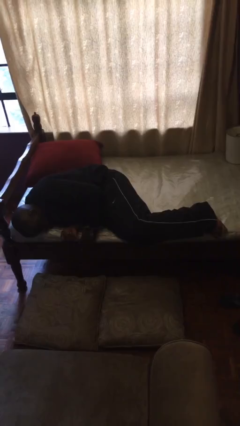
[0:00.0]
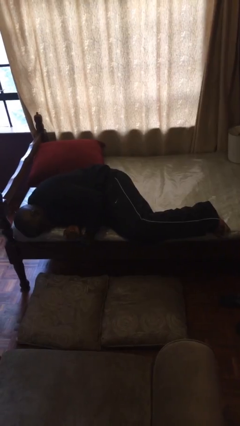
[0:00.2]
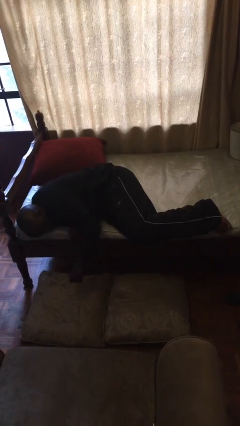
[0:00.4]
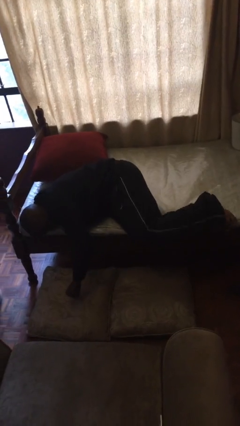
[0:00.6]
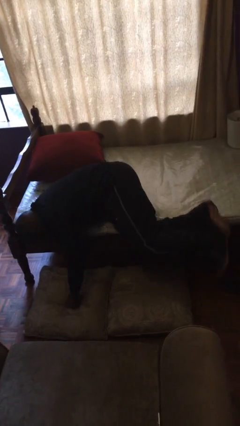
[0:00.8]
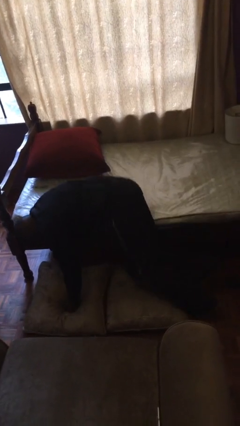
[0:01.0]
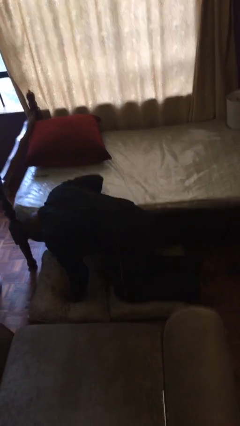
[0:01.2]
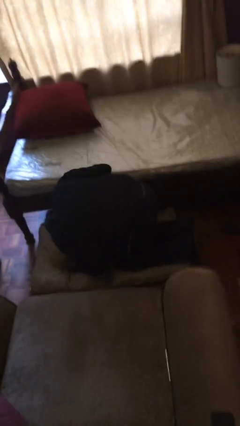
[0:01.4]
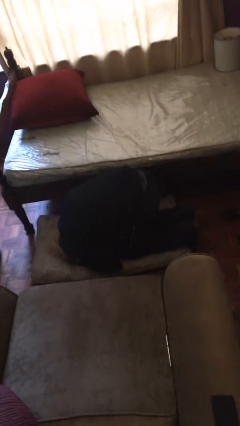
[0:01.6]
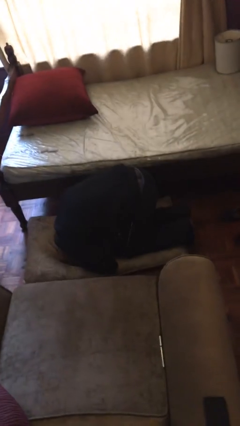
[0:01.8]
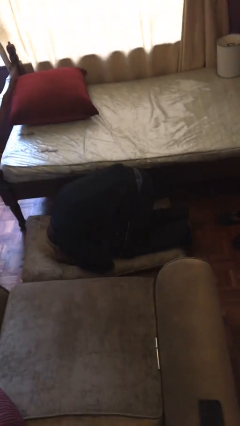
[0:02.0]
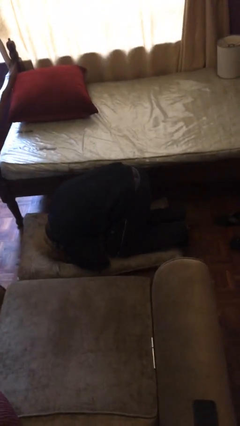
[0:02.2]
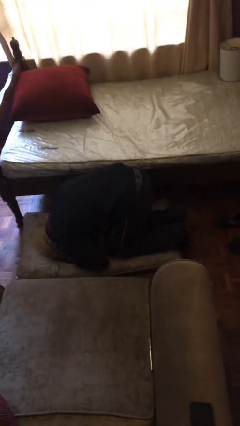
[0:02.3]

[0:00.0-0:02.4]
person falls from bed

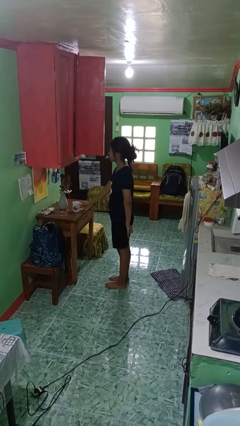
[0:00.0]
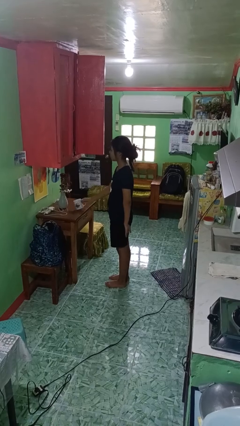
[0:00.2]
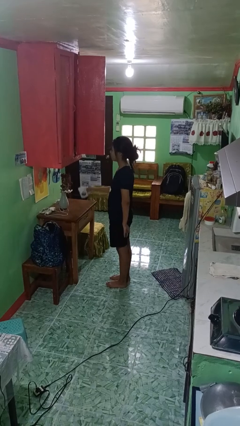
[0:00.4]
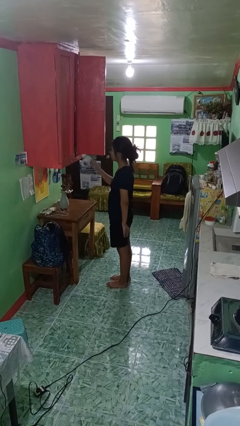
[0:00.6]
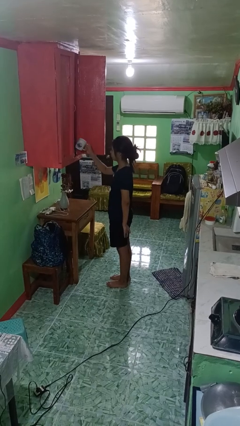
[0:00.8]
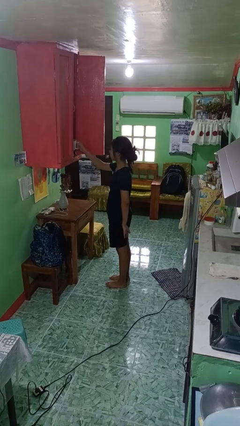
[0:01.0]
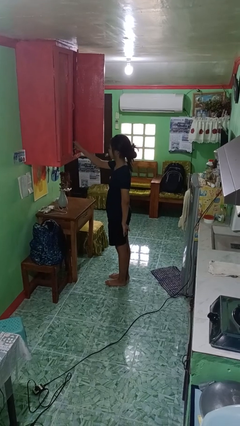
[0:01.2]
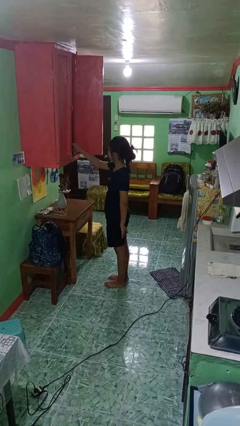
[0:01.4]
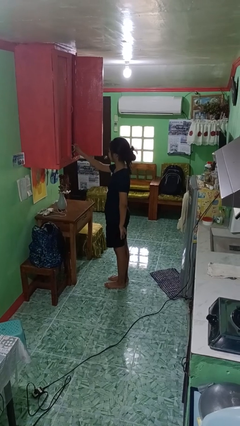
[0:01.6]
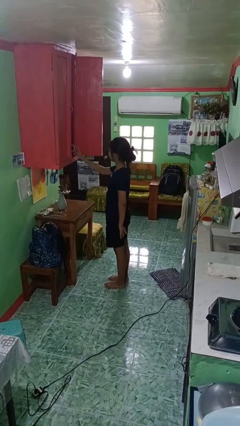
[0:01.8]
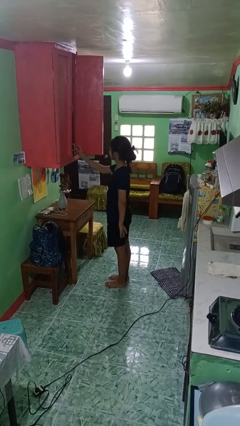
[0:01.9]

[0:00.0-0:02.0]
person puts object in cabinet

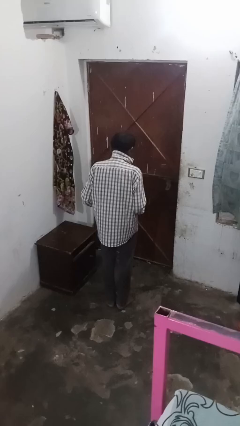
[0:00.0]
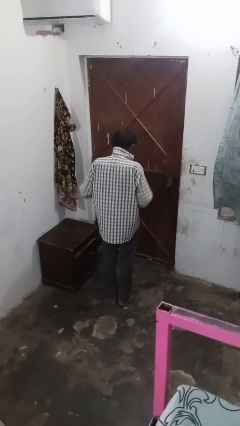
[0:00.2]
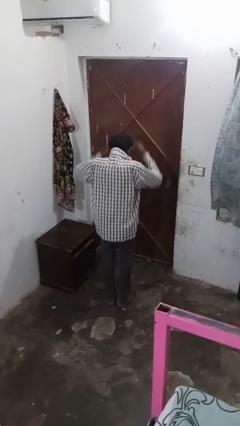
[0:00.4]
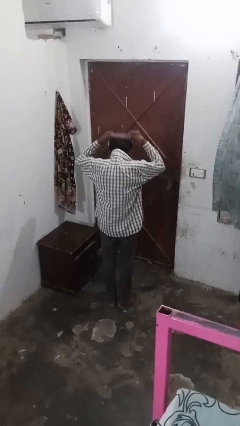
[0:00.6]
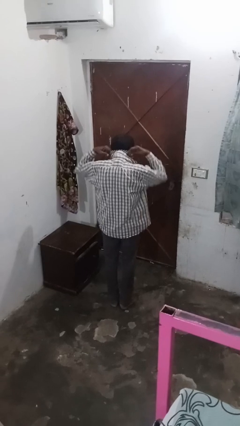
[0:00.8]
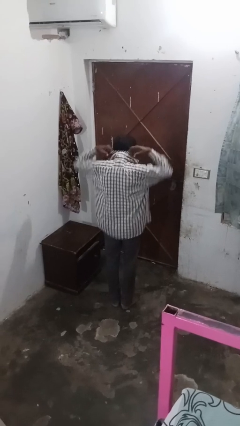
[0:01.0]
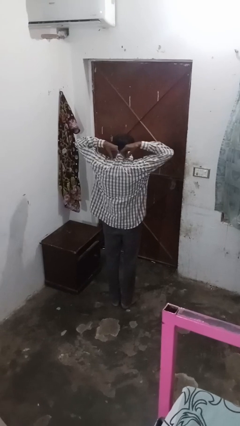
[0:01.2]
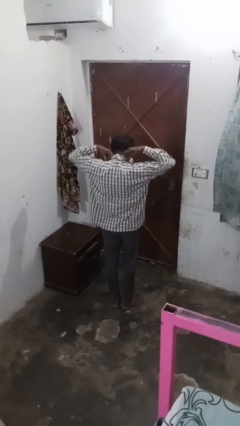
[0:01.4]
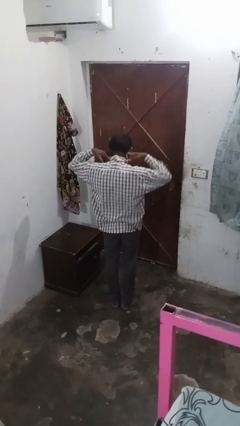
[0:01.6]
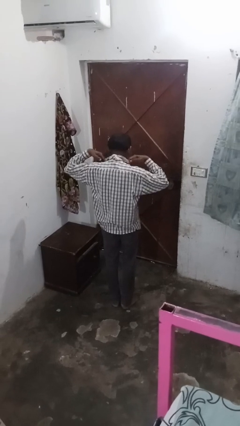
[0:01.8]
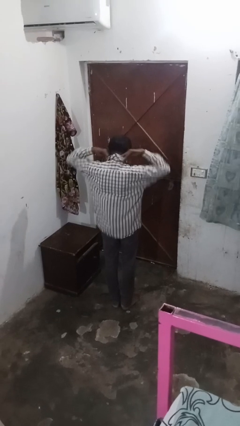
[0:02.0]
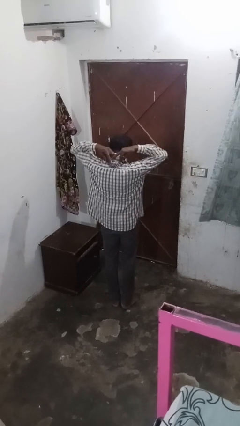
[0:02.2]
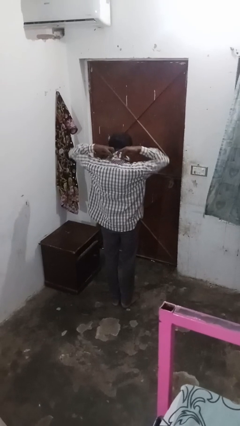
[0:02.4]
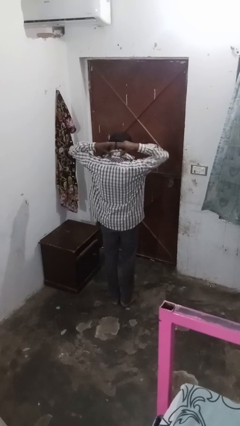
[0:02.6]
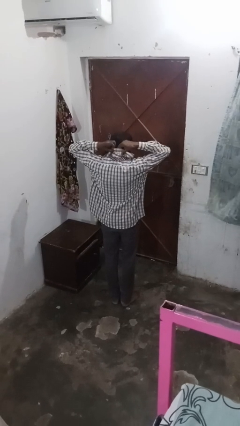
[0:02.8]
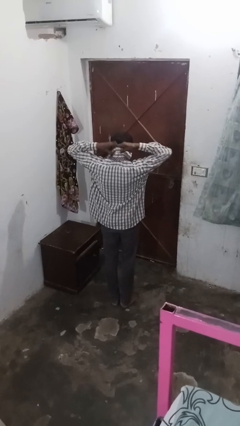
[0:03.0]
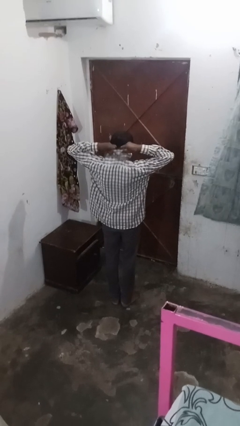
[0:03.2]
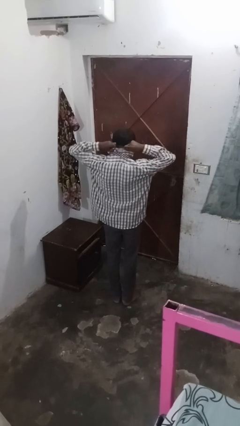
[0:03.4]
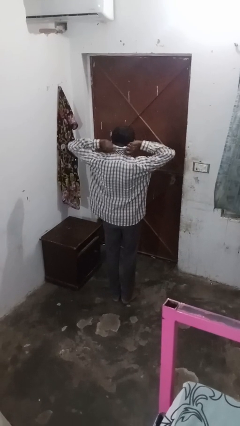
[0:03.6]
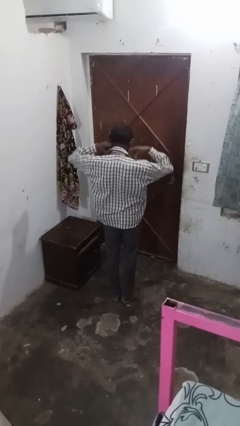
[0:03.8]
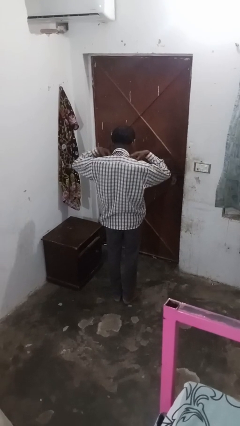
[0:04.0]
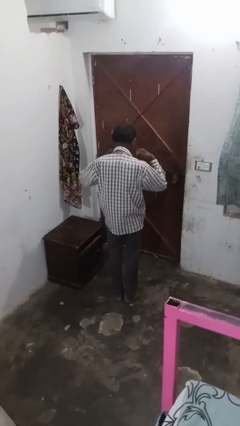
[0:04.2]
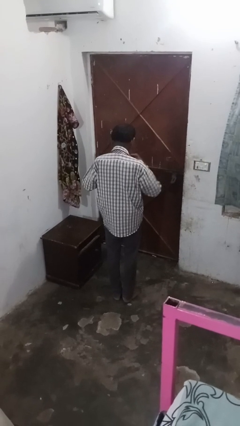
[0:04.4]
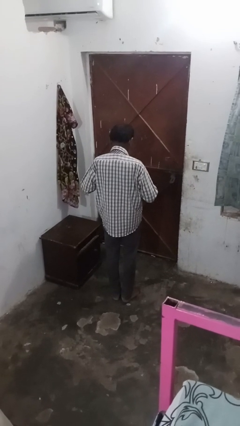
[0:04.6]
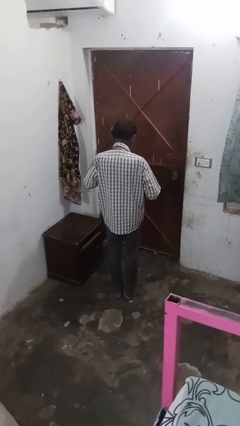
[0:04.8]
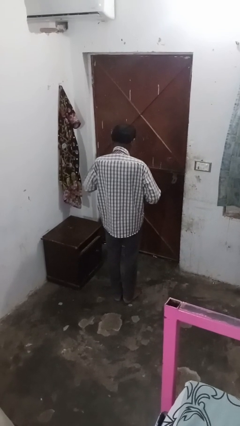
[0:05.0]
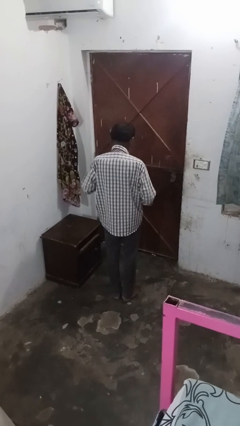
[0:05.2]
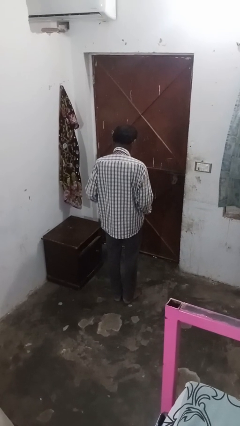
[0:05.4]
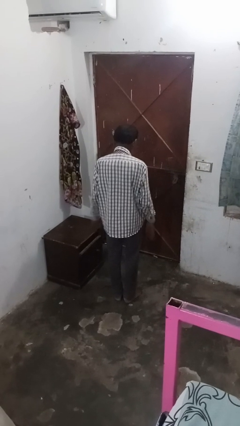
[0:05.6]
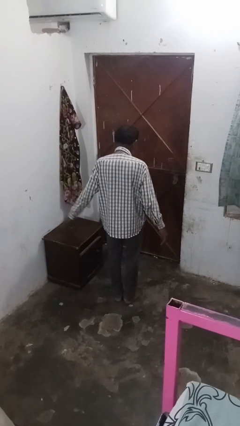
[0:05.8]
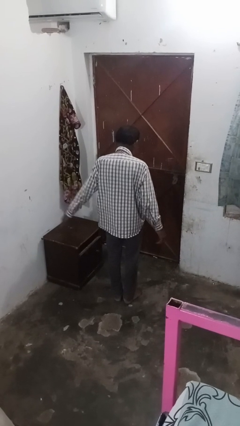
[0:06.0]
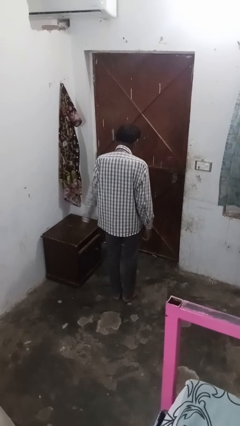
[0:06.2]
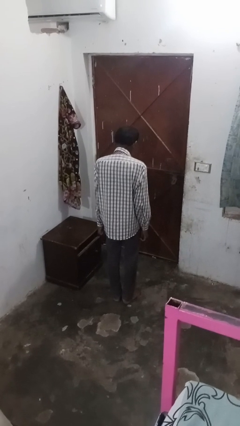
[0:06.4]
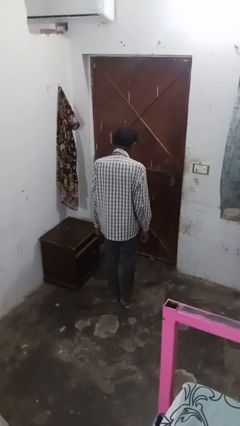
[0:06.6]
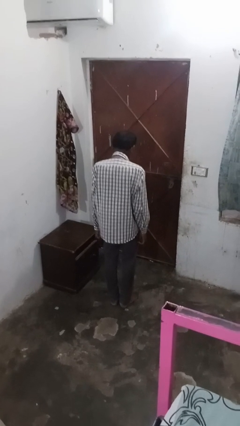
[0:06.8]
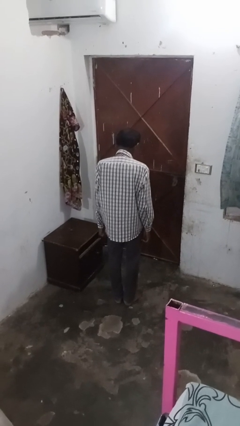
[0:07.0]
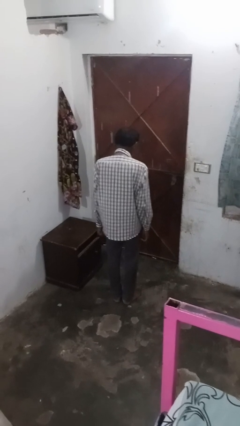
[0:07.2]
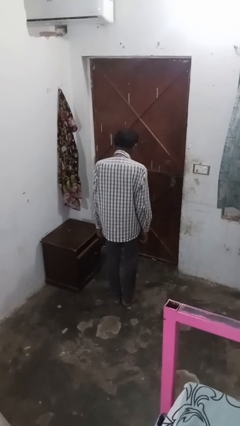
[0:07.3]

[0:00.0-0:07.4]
person puts on necktie

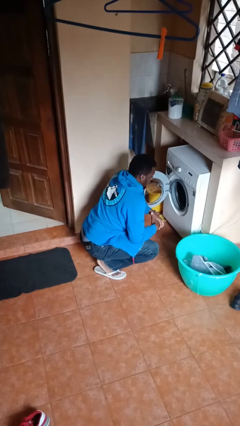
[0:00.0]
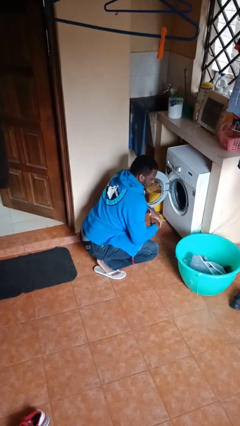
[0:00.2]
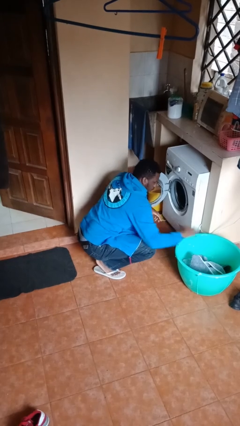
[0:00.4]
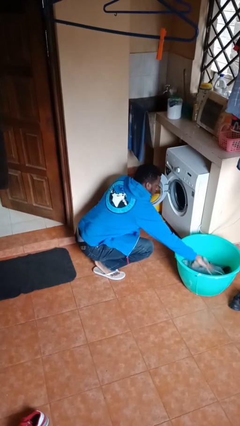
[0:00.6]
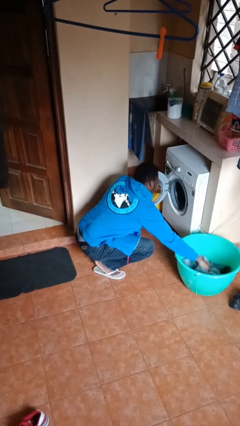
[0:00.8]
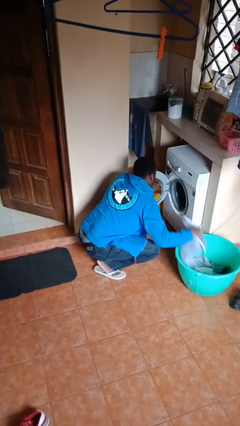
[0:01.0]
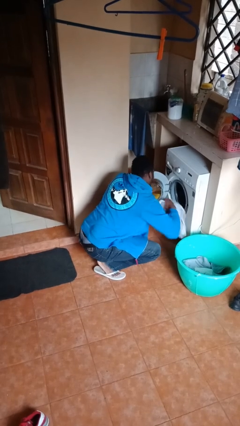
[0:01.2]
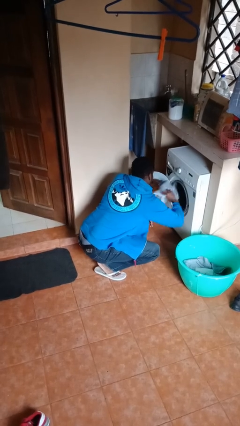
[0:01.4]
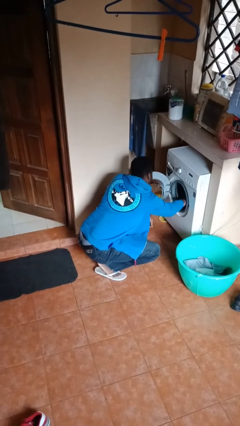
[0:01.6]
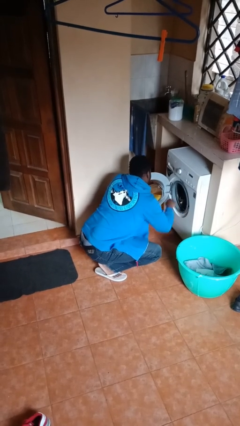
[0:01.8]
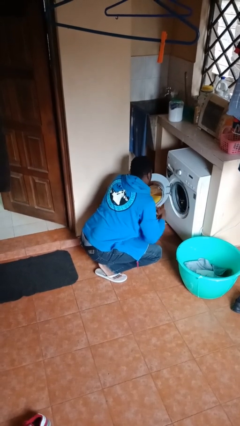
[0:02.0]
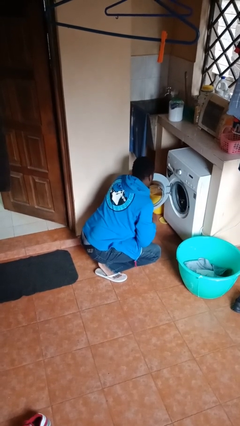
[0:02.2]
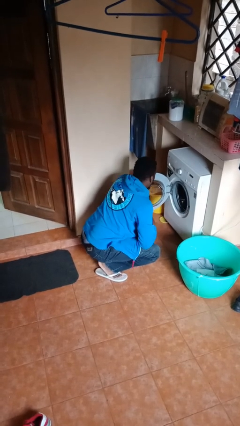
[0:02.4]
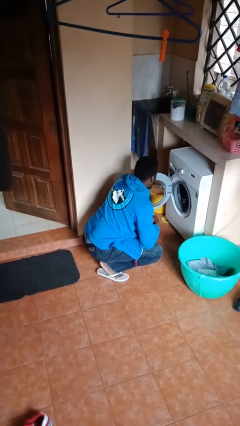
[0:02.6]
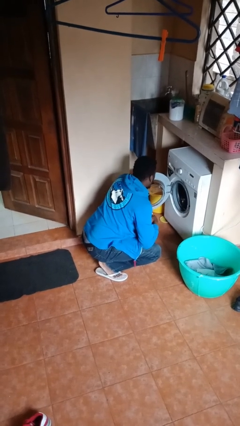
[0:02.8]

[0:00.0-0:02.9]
person loads clotheswasher

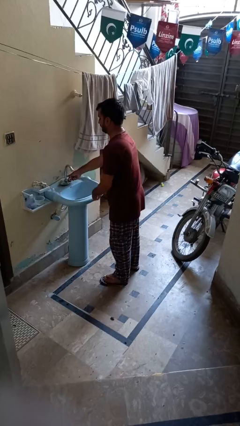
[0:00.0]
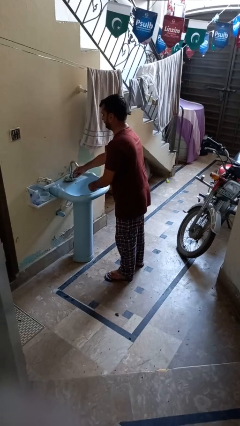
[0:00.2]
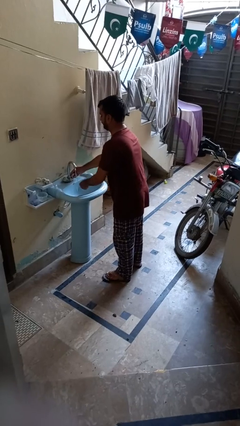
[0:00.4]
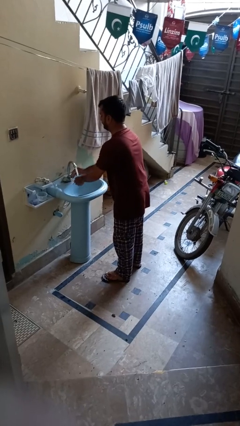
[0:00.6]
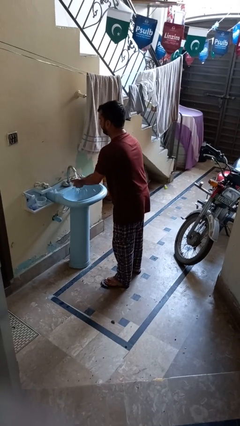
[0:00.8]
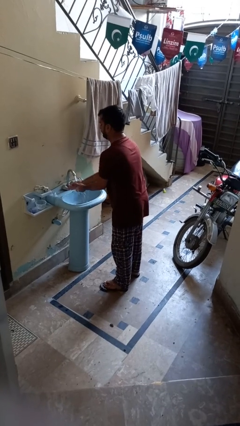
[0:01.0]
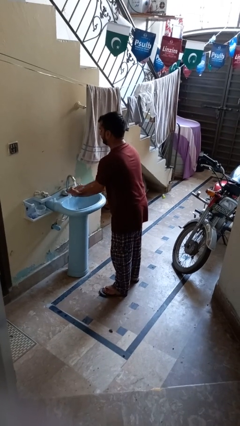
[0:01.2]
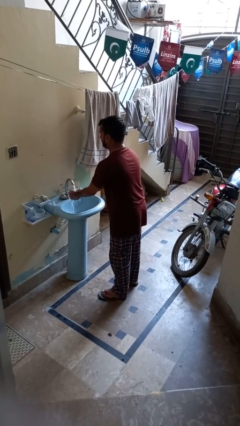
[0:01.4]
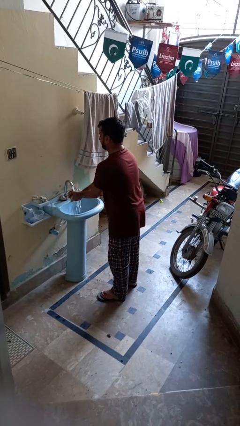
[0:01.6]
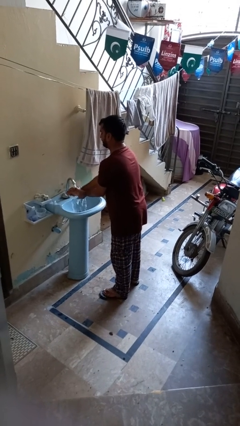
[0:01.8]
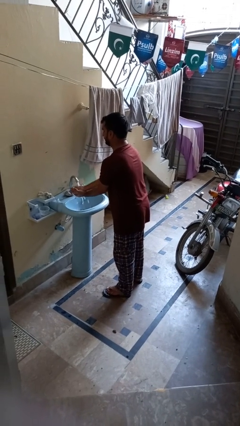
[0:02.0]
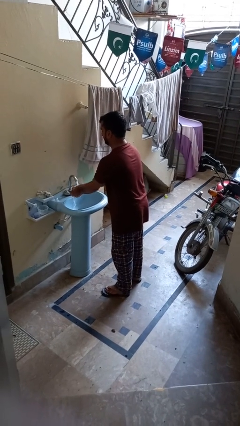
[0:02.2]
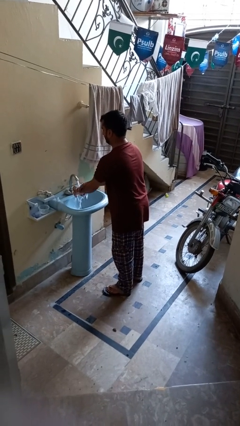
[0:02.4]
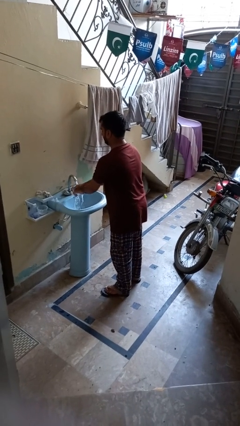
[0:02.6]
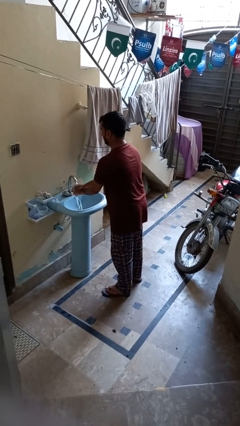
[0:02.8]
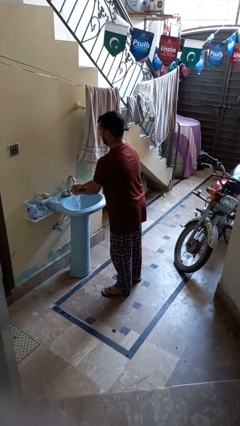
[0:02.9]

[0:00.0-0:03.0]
person washes hands
